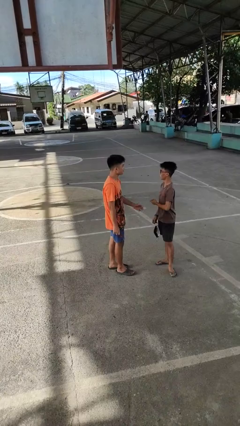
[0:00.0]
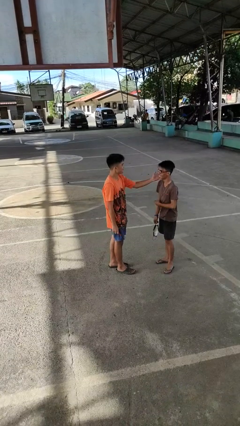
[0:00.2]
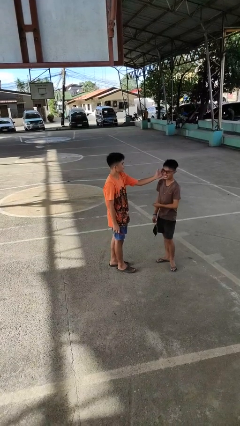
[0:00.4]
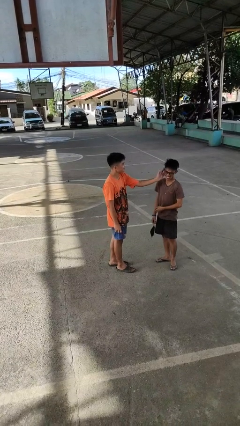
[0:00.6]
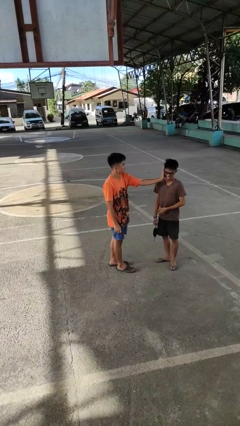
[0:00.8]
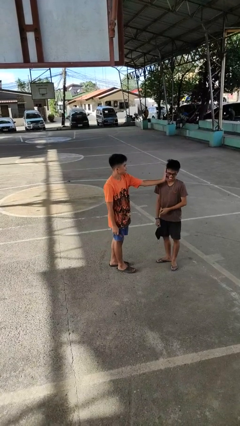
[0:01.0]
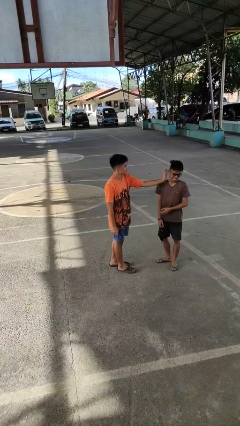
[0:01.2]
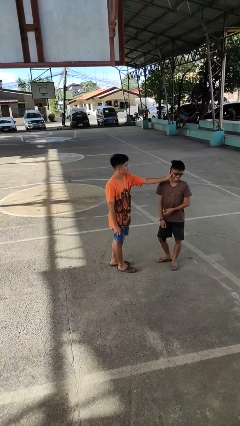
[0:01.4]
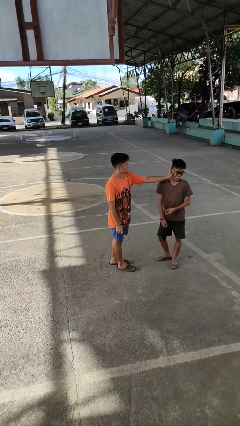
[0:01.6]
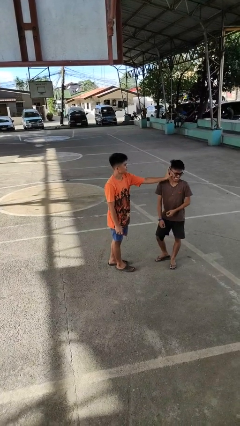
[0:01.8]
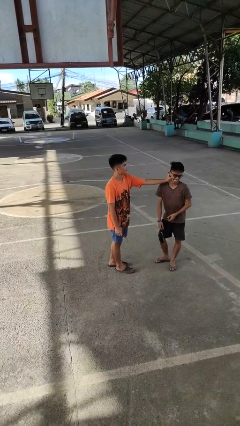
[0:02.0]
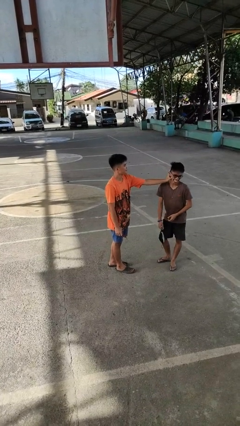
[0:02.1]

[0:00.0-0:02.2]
person touches face of person

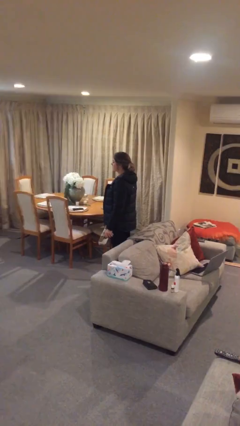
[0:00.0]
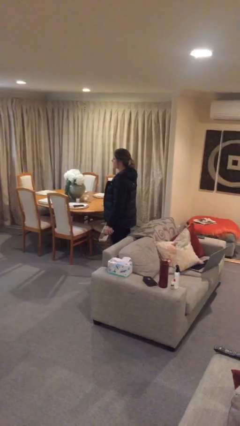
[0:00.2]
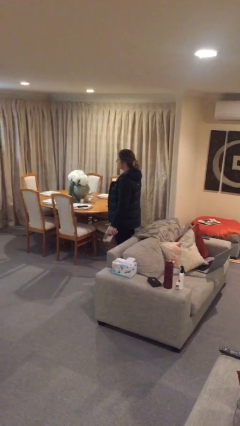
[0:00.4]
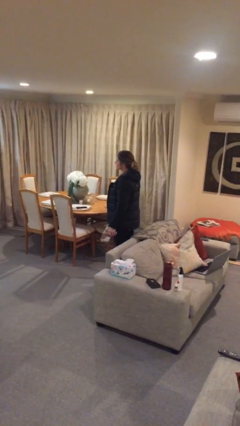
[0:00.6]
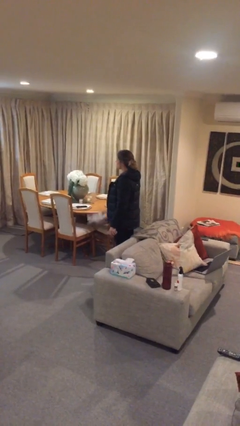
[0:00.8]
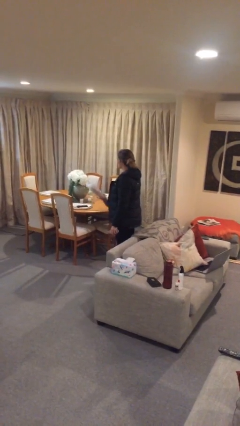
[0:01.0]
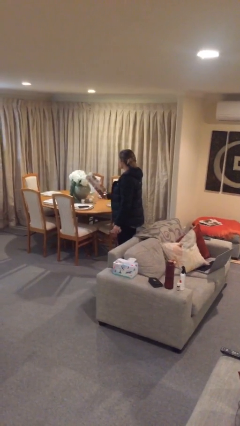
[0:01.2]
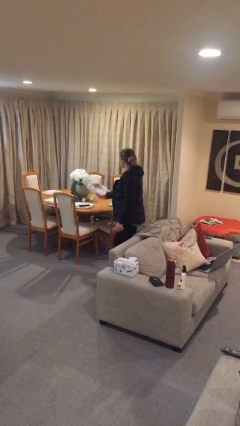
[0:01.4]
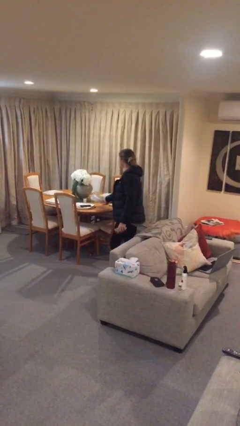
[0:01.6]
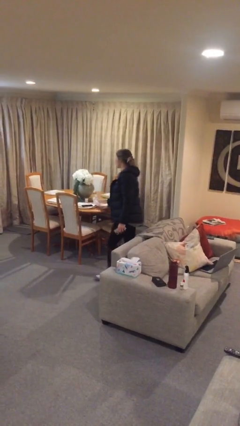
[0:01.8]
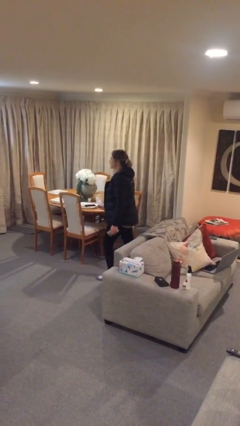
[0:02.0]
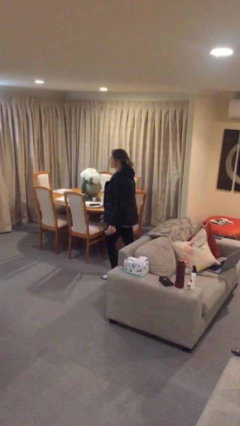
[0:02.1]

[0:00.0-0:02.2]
person puts down object on table

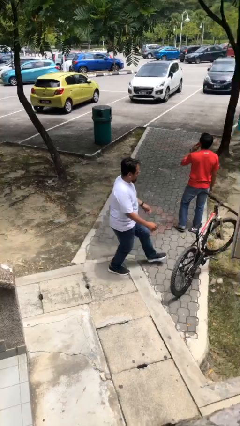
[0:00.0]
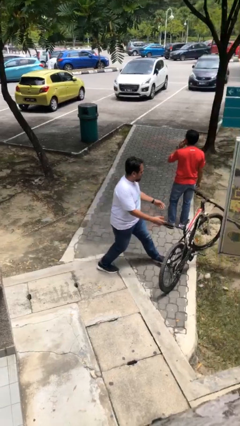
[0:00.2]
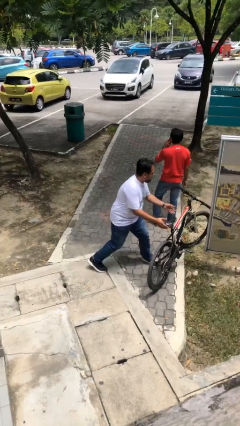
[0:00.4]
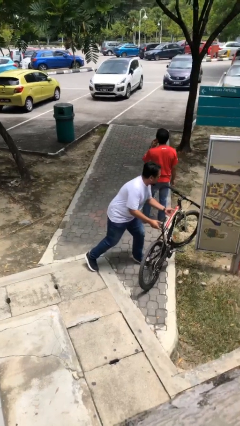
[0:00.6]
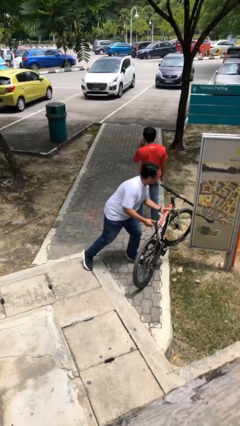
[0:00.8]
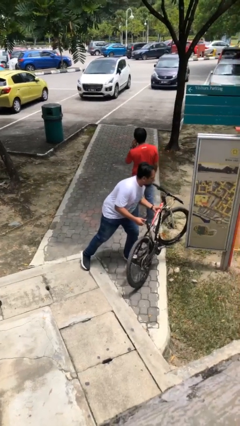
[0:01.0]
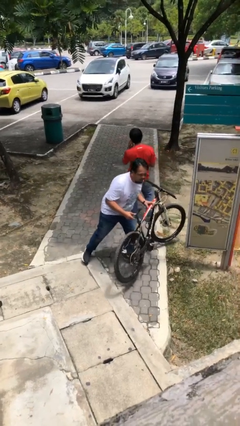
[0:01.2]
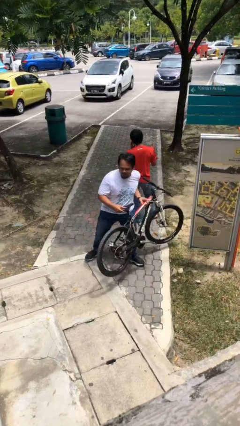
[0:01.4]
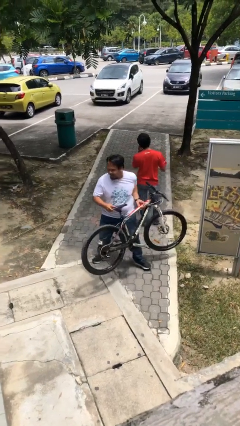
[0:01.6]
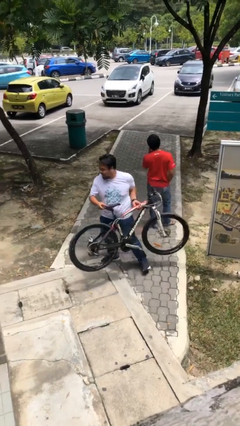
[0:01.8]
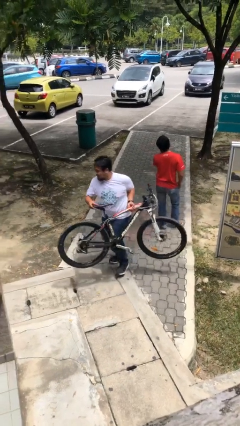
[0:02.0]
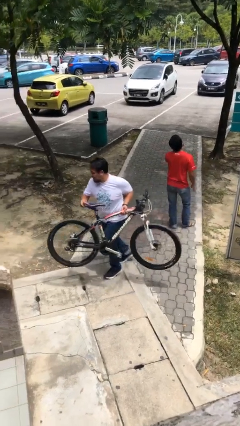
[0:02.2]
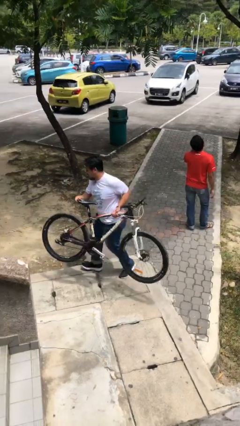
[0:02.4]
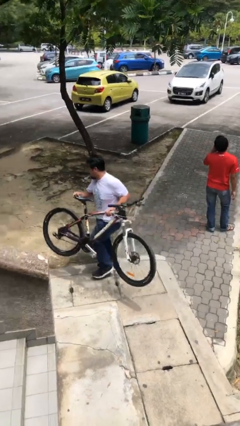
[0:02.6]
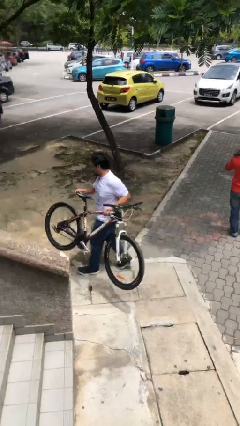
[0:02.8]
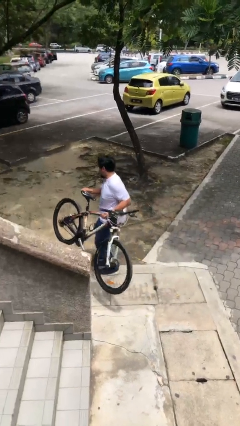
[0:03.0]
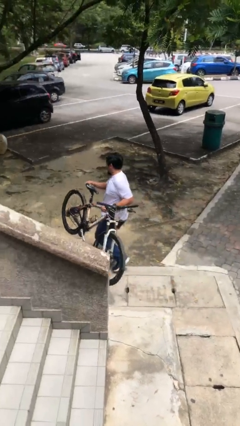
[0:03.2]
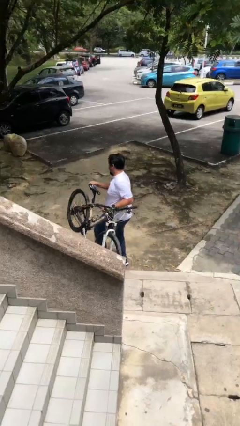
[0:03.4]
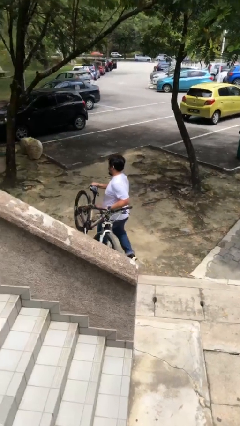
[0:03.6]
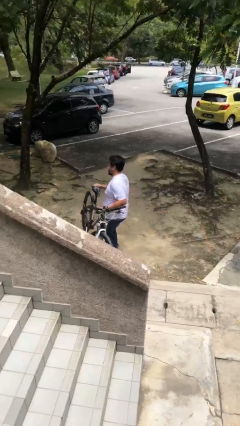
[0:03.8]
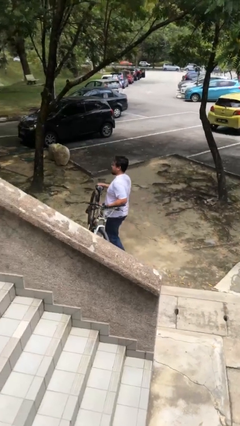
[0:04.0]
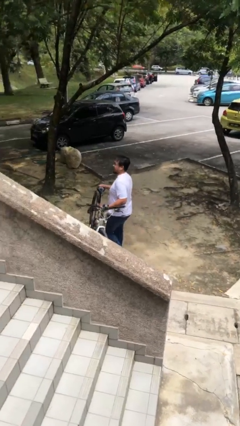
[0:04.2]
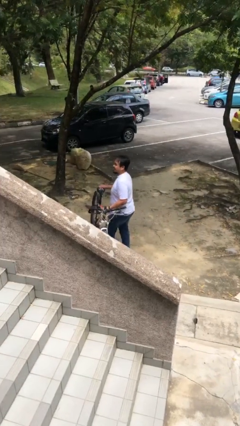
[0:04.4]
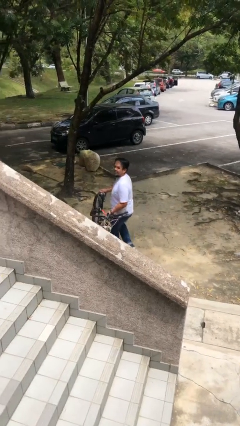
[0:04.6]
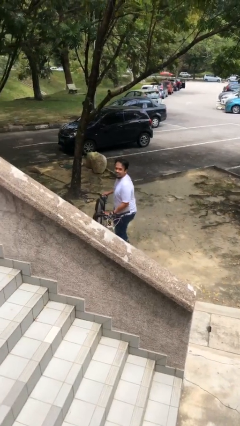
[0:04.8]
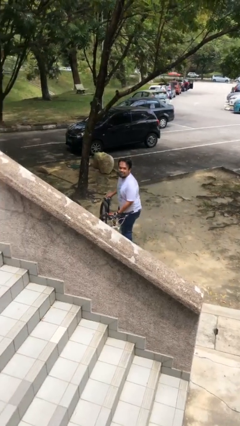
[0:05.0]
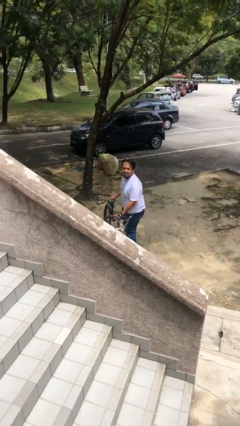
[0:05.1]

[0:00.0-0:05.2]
person steals object from person

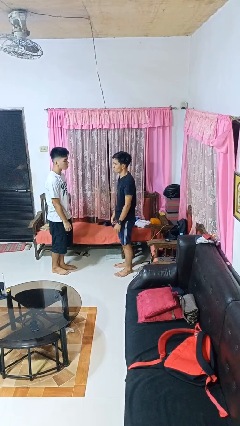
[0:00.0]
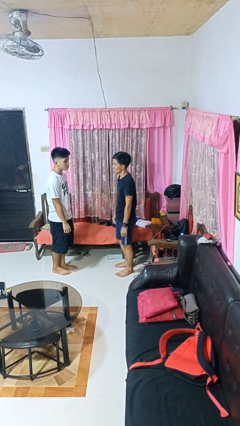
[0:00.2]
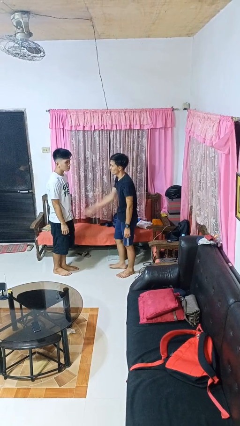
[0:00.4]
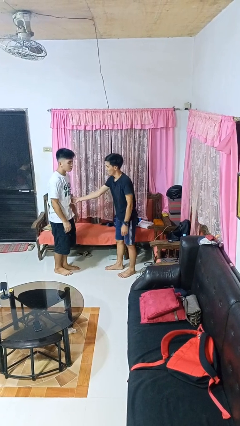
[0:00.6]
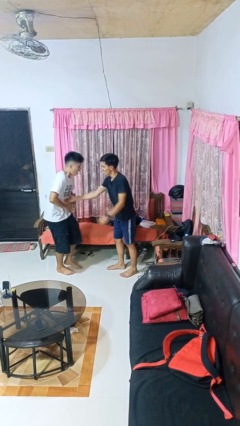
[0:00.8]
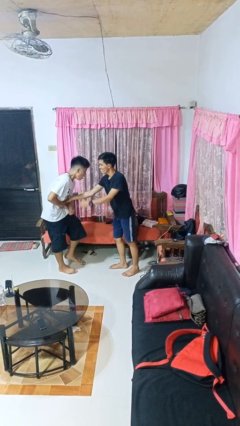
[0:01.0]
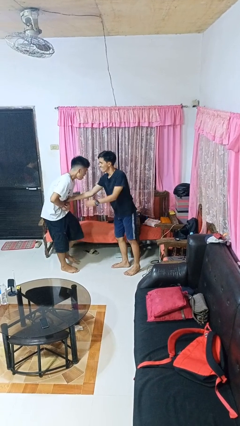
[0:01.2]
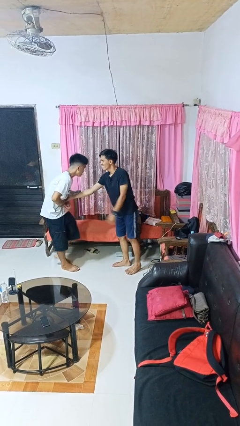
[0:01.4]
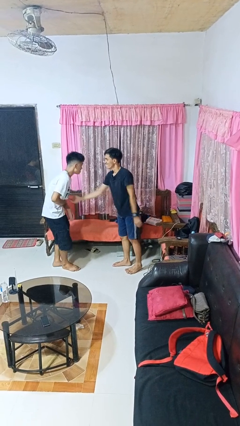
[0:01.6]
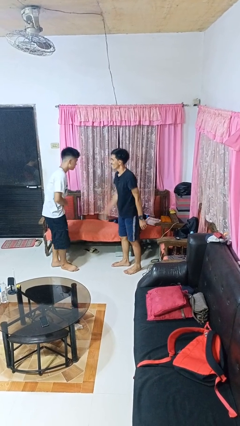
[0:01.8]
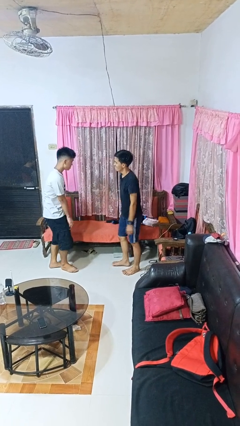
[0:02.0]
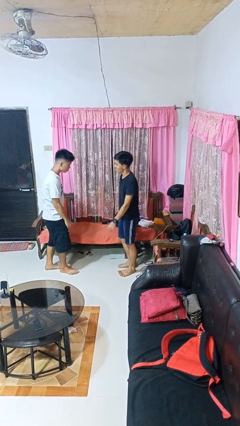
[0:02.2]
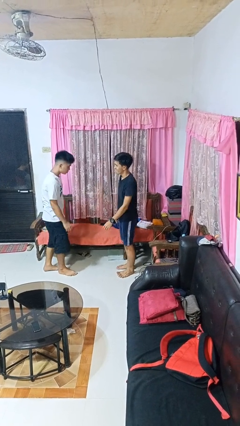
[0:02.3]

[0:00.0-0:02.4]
person tickles person

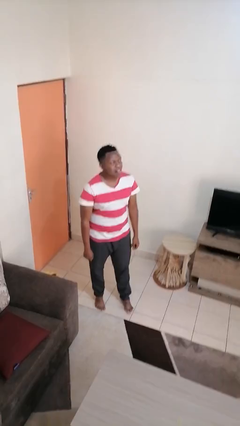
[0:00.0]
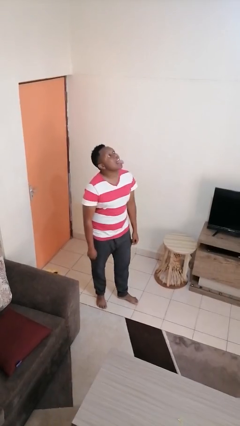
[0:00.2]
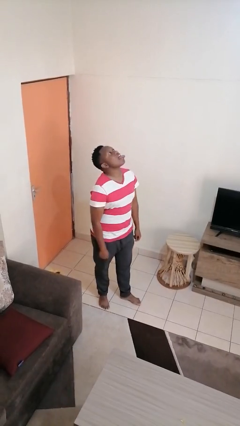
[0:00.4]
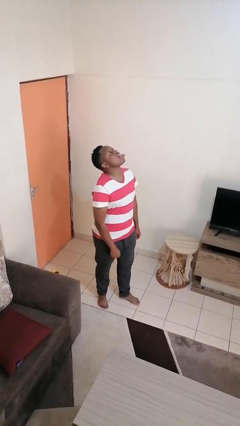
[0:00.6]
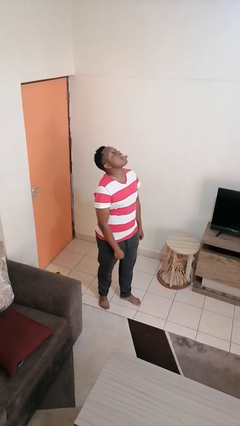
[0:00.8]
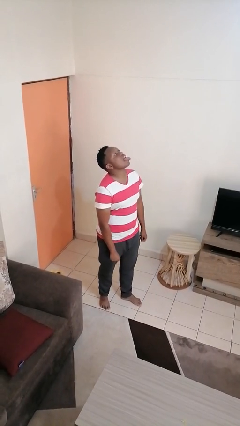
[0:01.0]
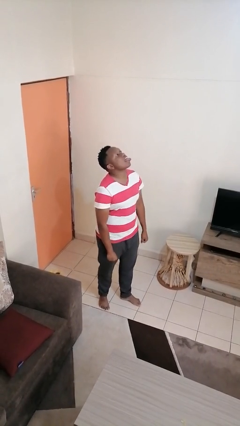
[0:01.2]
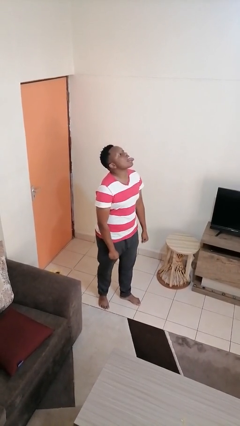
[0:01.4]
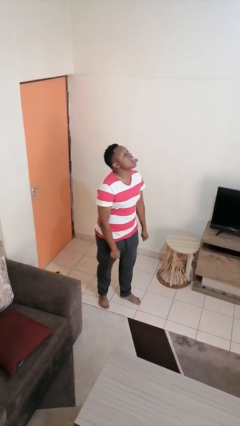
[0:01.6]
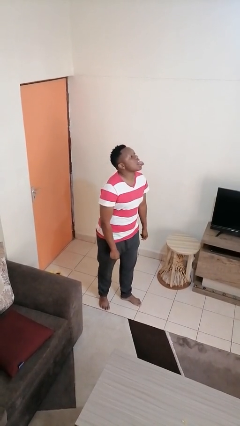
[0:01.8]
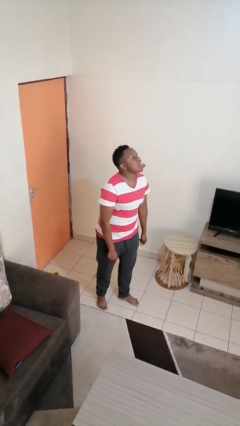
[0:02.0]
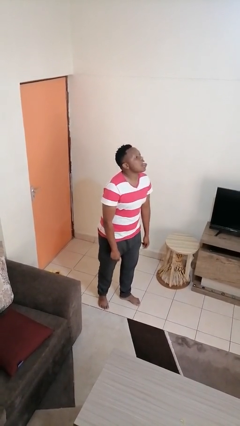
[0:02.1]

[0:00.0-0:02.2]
person sticks out tongue

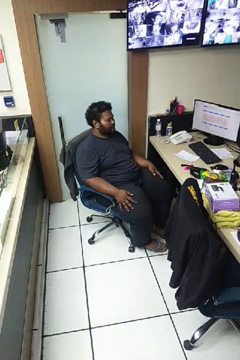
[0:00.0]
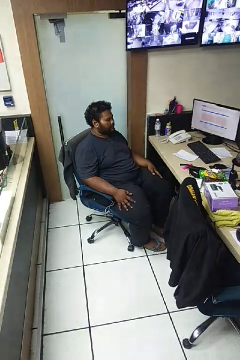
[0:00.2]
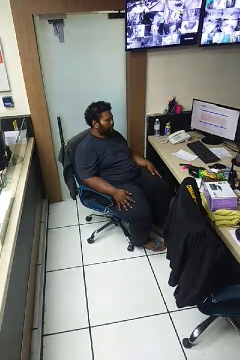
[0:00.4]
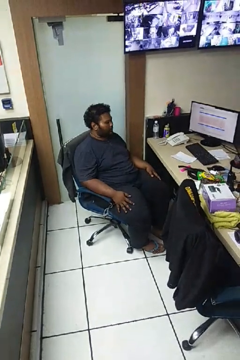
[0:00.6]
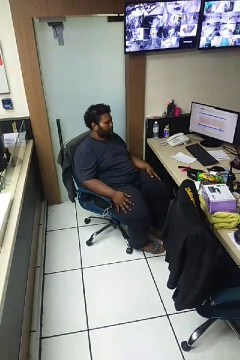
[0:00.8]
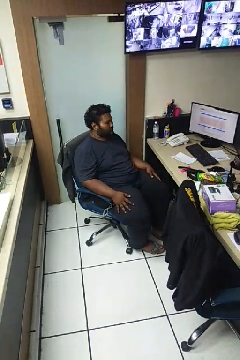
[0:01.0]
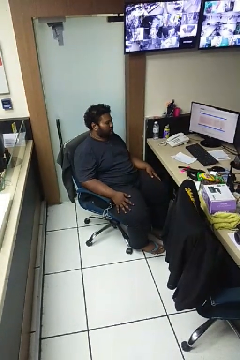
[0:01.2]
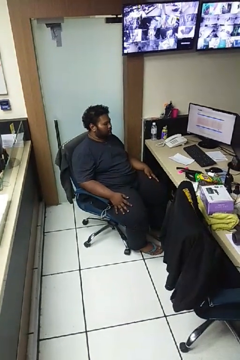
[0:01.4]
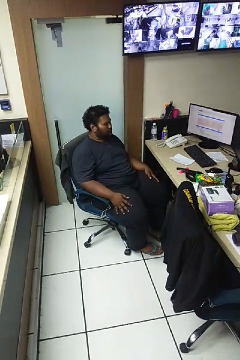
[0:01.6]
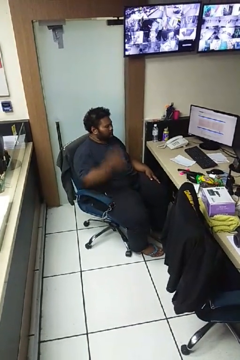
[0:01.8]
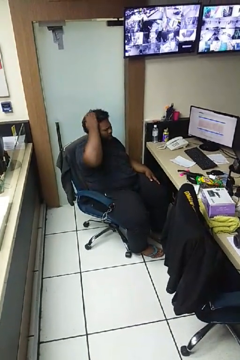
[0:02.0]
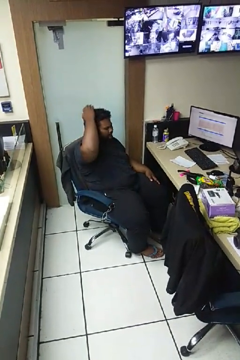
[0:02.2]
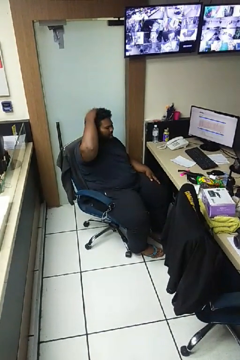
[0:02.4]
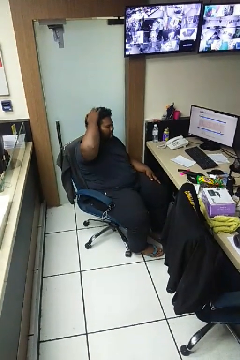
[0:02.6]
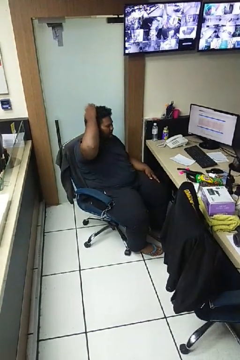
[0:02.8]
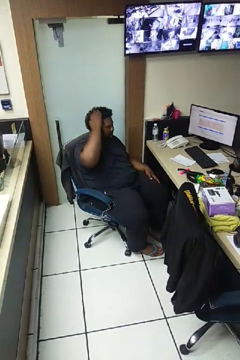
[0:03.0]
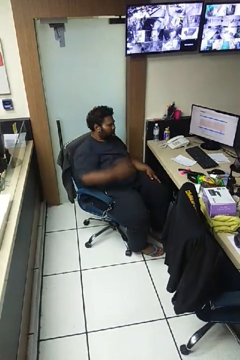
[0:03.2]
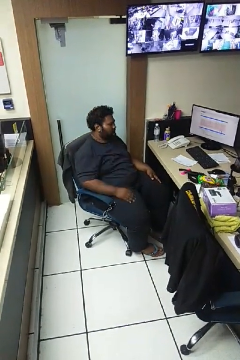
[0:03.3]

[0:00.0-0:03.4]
person pats head

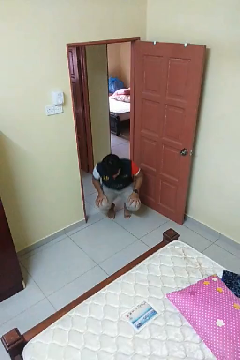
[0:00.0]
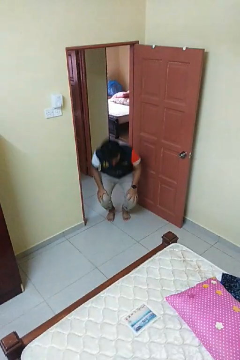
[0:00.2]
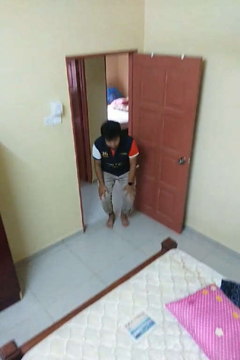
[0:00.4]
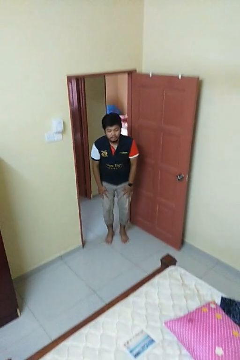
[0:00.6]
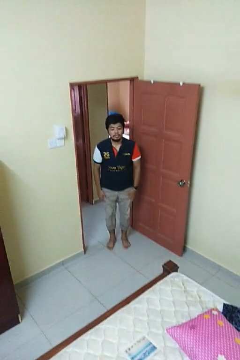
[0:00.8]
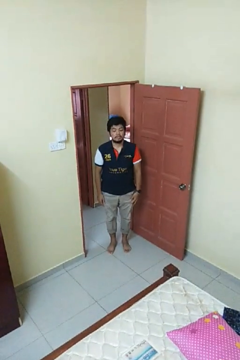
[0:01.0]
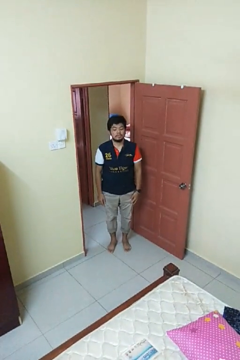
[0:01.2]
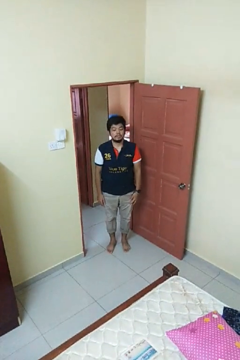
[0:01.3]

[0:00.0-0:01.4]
person stands up
